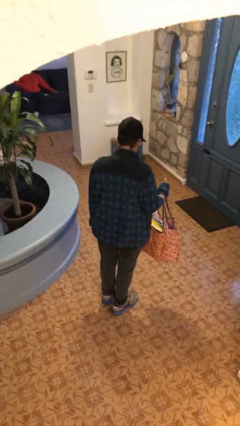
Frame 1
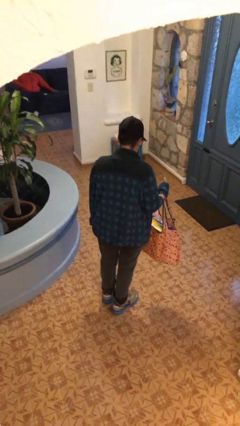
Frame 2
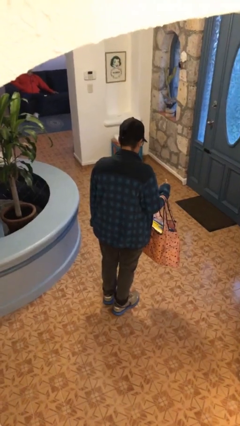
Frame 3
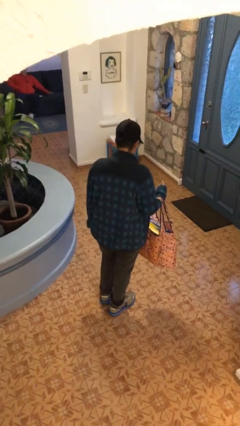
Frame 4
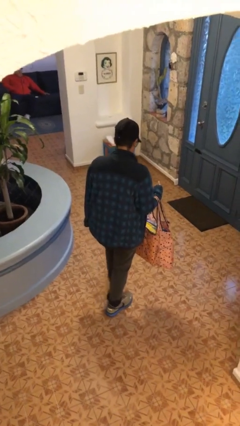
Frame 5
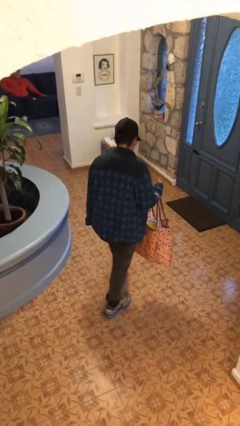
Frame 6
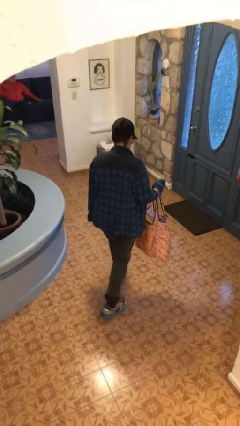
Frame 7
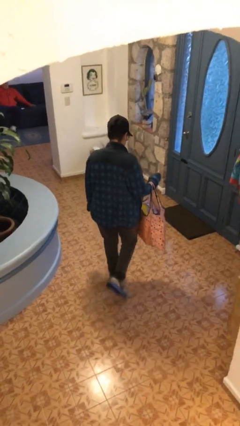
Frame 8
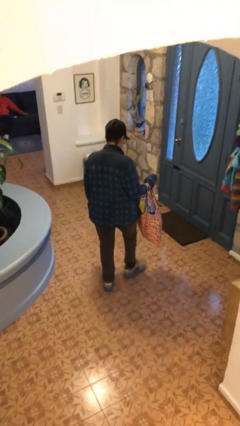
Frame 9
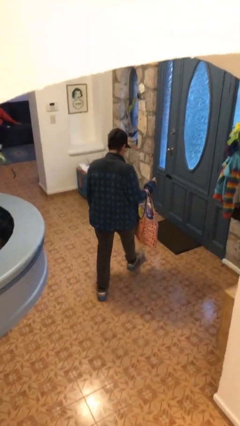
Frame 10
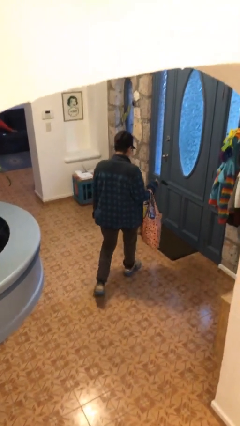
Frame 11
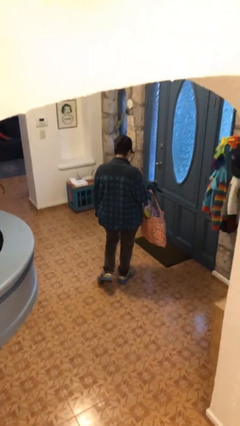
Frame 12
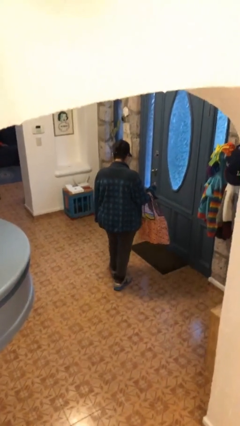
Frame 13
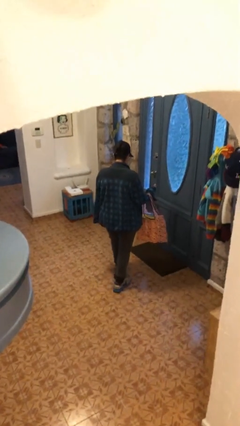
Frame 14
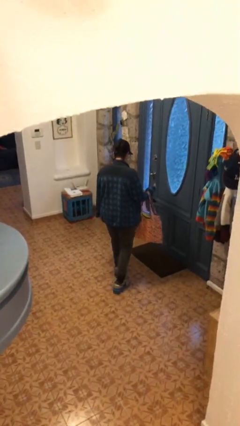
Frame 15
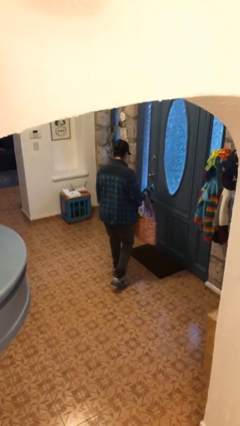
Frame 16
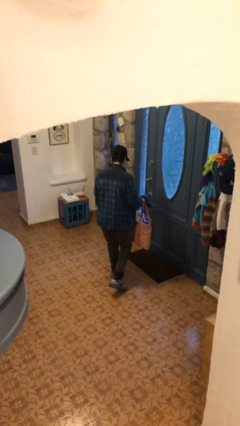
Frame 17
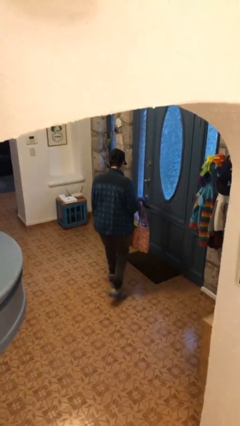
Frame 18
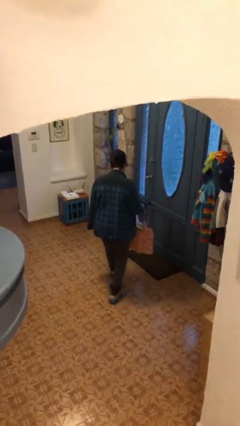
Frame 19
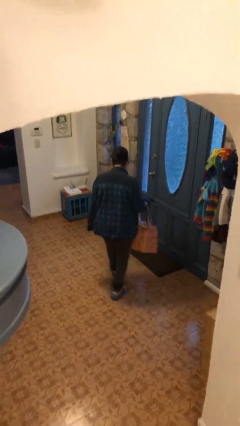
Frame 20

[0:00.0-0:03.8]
person carries groceries

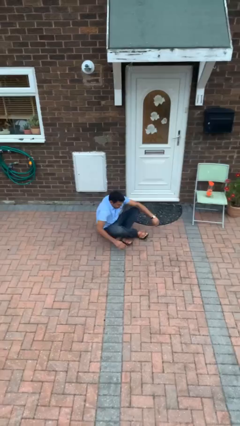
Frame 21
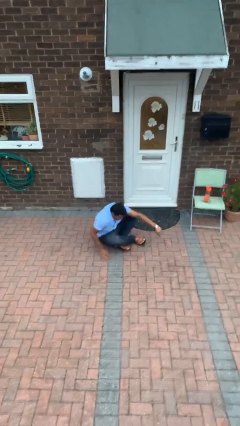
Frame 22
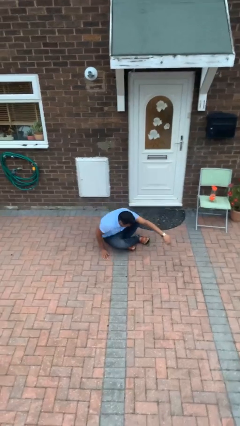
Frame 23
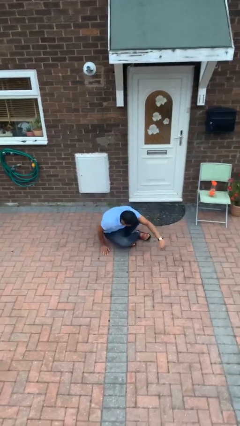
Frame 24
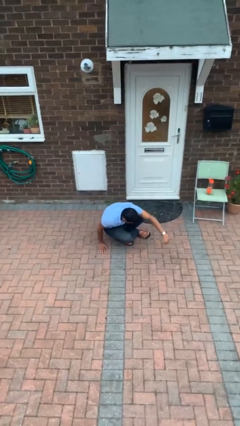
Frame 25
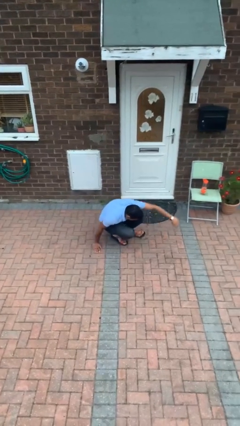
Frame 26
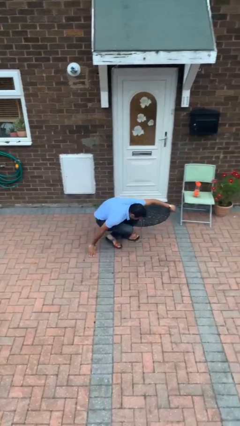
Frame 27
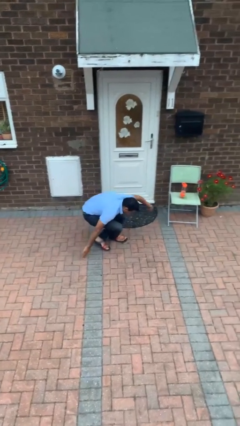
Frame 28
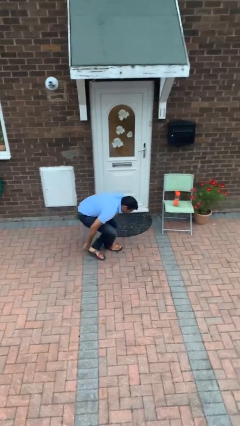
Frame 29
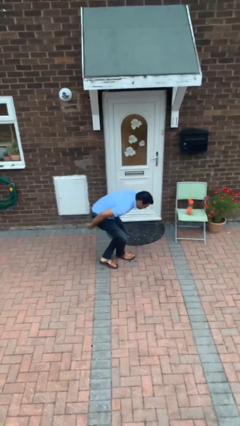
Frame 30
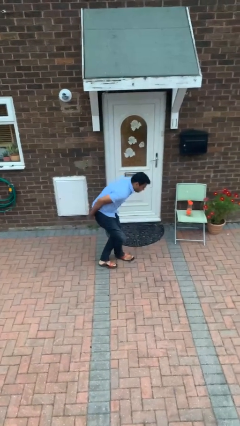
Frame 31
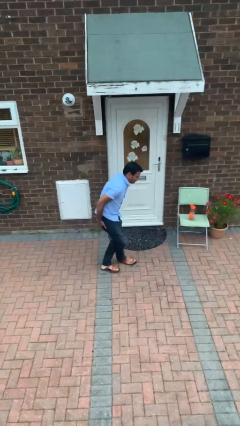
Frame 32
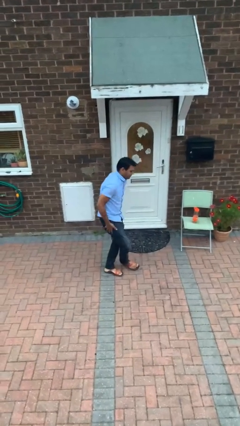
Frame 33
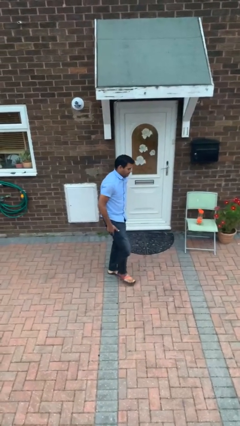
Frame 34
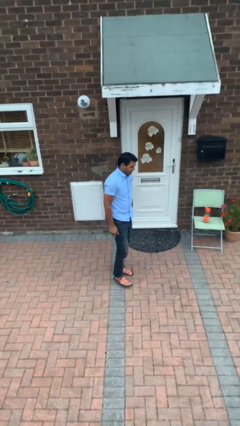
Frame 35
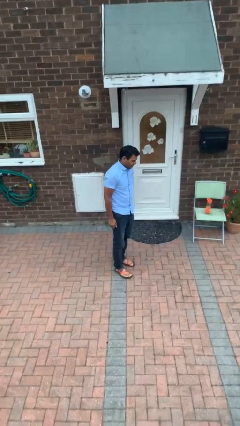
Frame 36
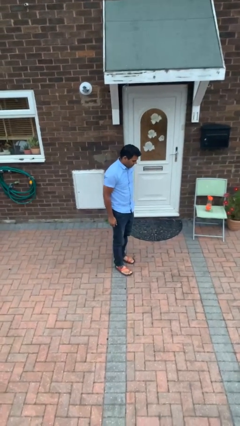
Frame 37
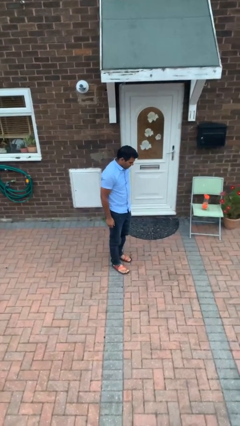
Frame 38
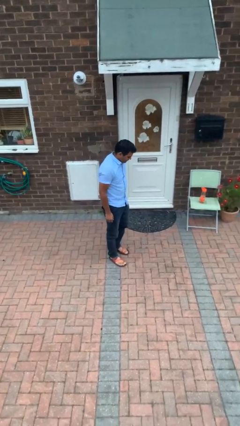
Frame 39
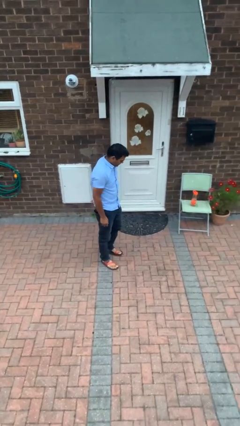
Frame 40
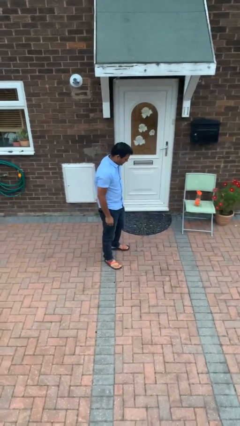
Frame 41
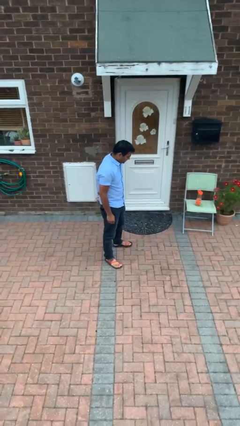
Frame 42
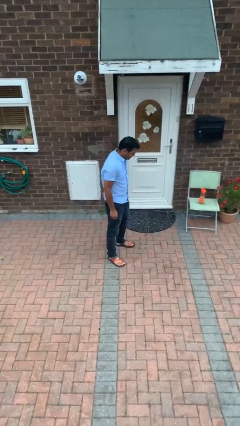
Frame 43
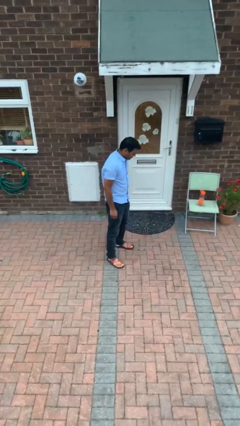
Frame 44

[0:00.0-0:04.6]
person stands up from floor

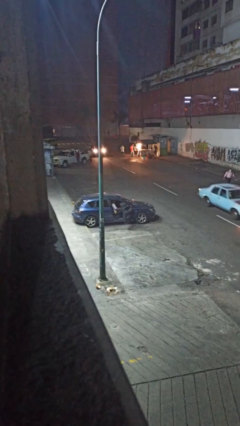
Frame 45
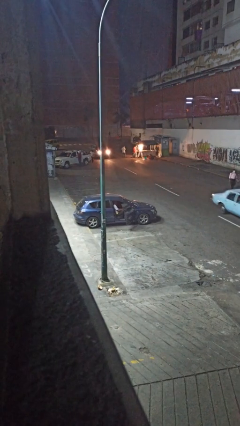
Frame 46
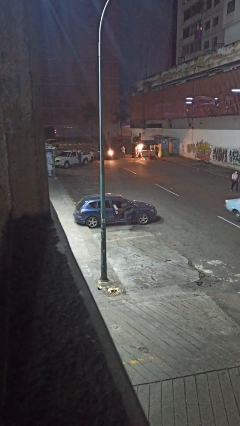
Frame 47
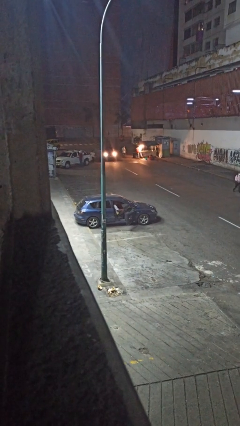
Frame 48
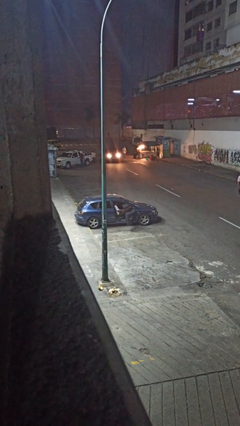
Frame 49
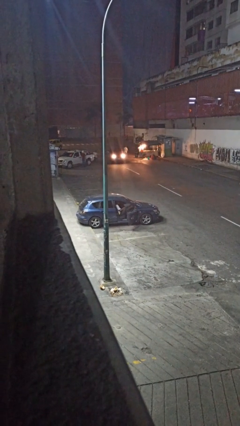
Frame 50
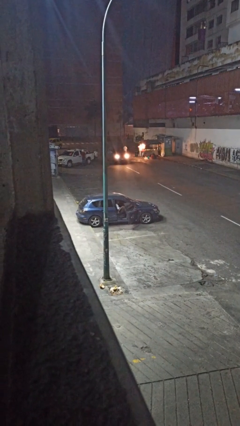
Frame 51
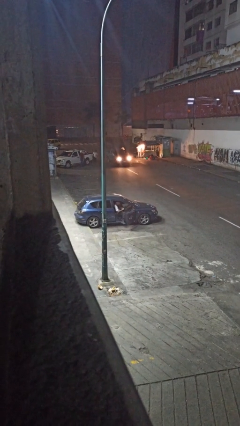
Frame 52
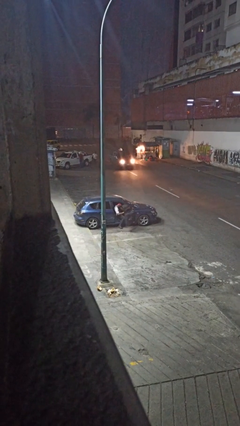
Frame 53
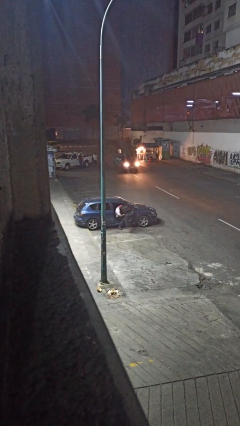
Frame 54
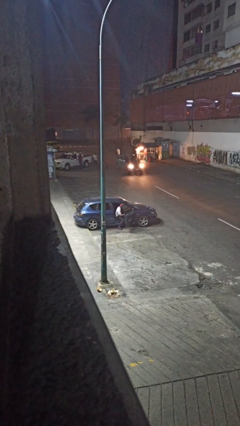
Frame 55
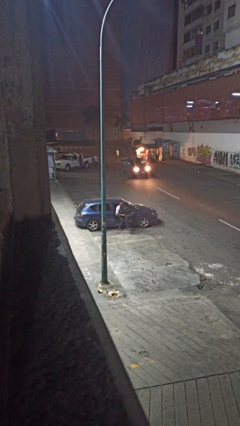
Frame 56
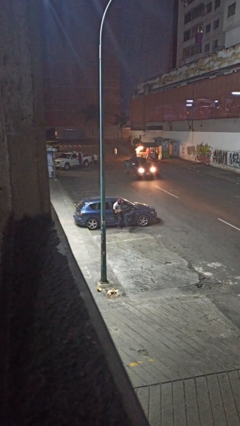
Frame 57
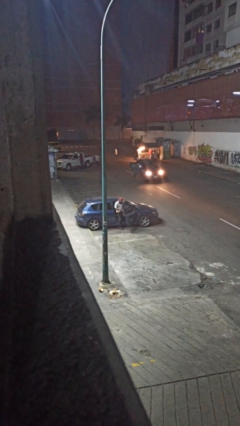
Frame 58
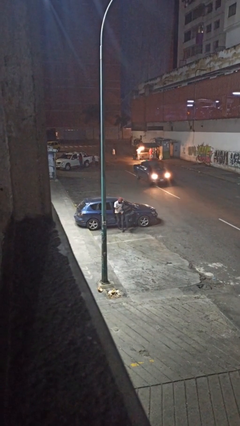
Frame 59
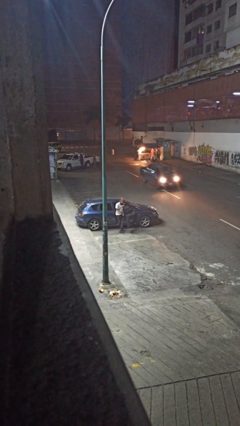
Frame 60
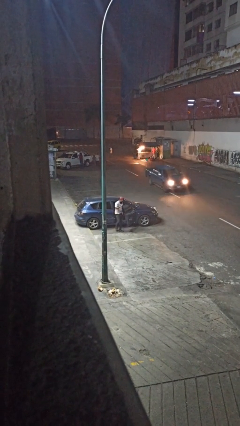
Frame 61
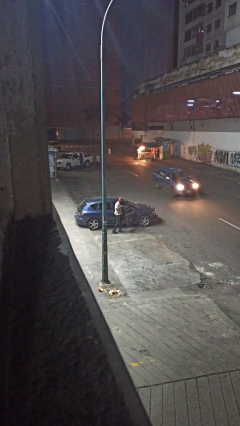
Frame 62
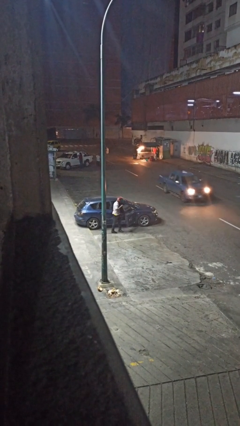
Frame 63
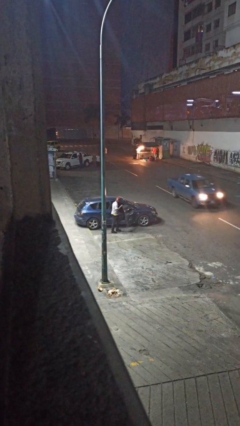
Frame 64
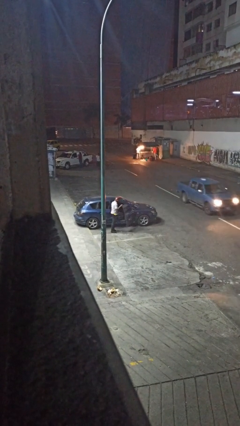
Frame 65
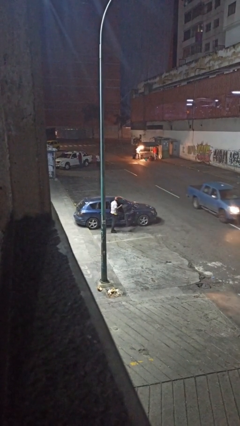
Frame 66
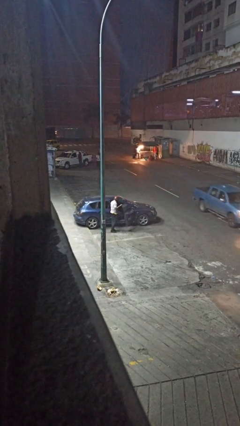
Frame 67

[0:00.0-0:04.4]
person exits car

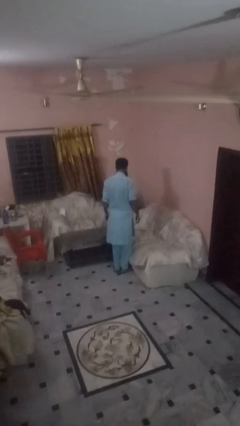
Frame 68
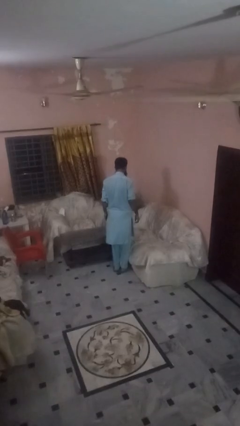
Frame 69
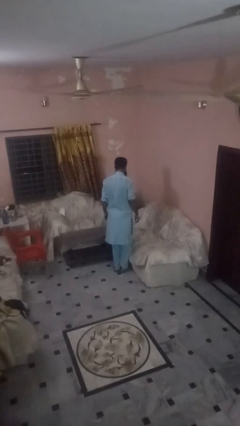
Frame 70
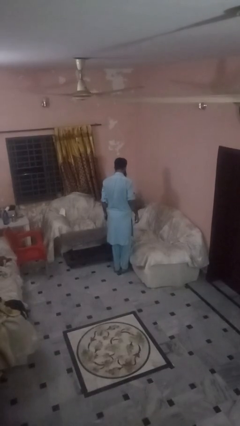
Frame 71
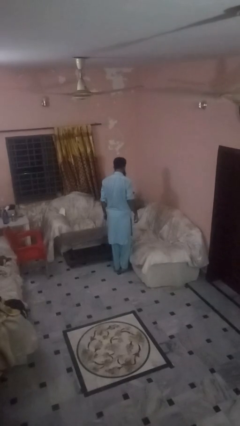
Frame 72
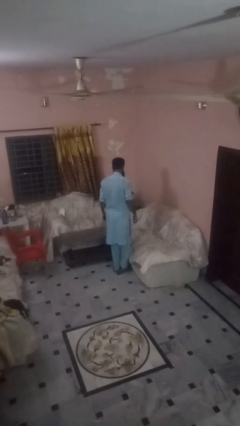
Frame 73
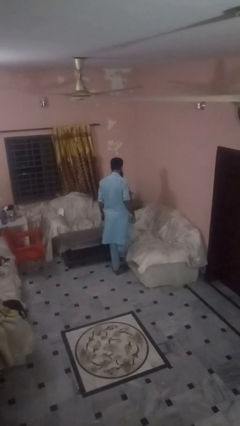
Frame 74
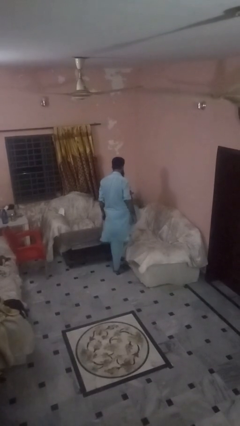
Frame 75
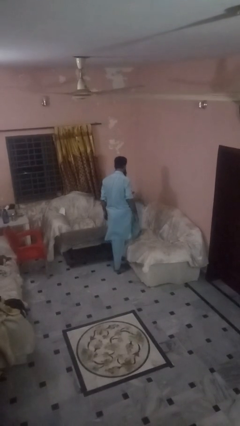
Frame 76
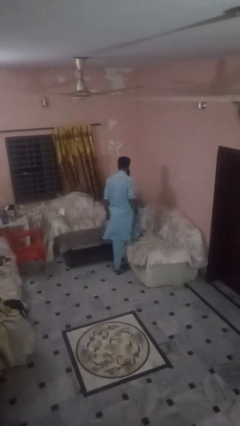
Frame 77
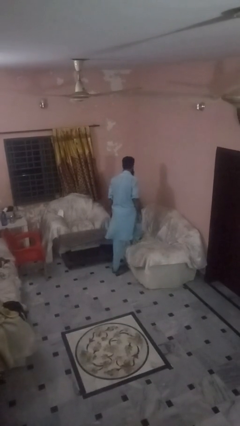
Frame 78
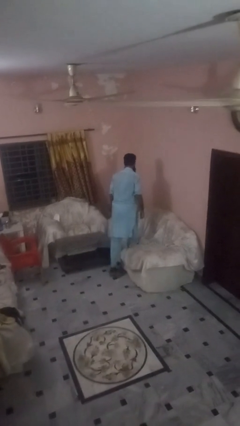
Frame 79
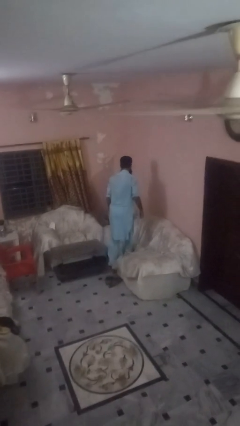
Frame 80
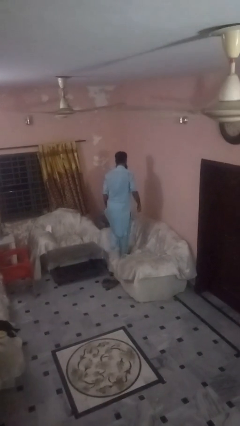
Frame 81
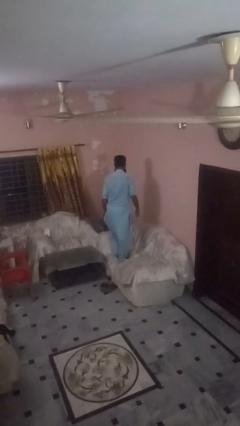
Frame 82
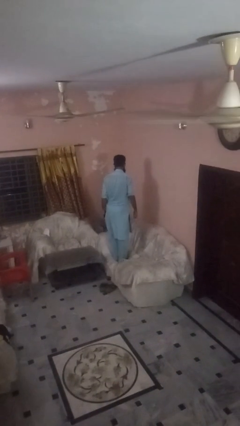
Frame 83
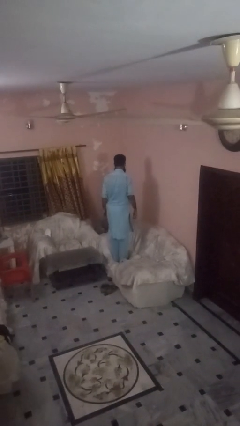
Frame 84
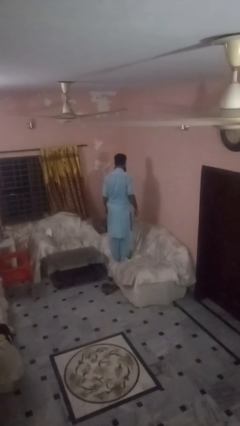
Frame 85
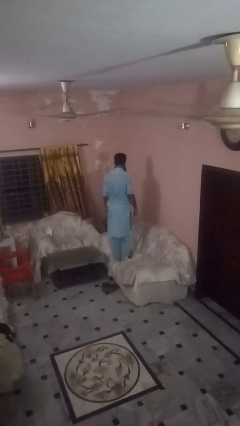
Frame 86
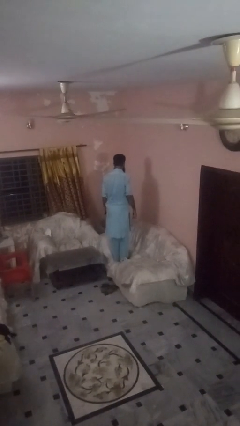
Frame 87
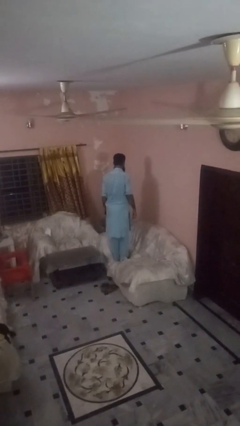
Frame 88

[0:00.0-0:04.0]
person climbs on couch

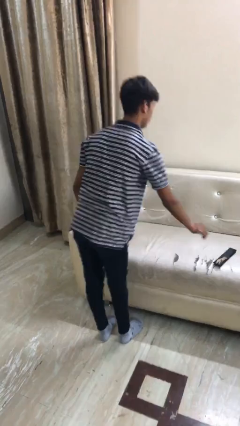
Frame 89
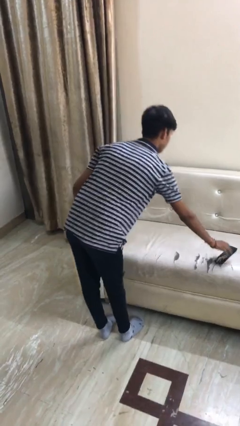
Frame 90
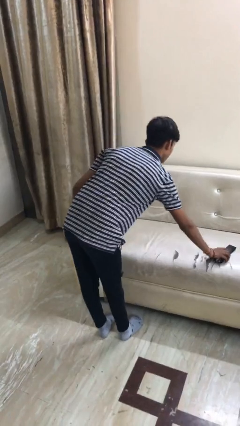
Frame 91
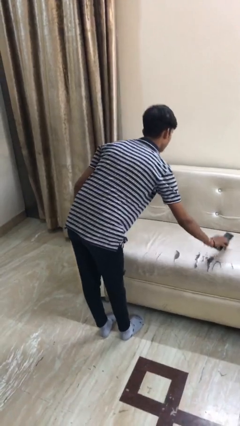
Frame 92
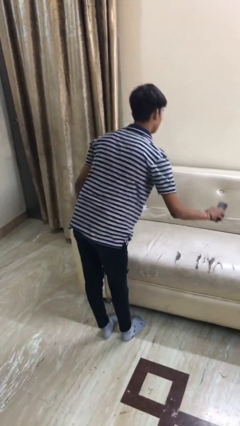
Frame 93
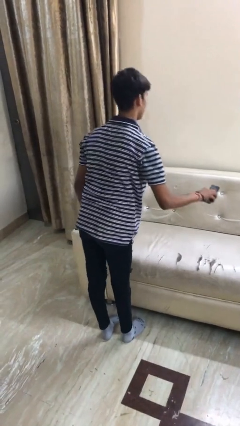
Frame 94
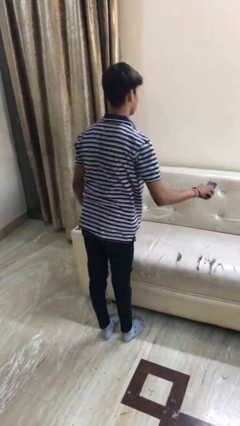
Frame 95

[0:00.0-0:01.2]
person picks up object from bed
